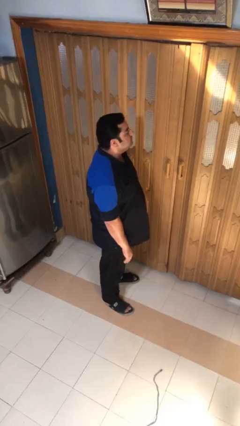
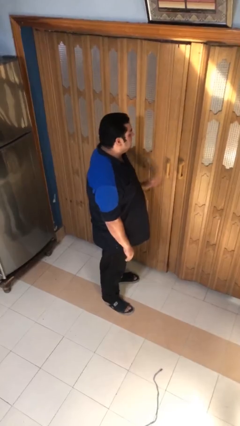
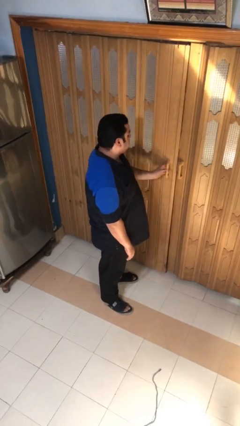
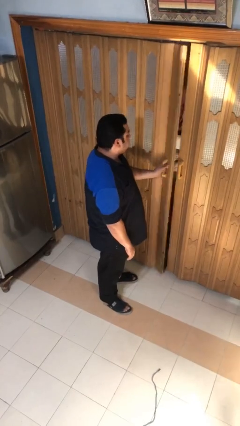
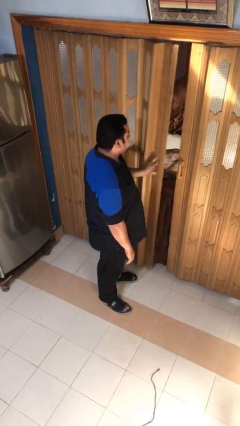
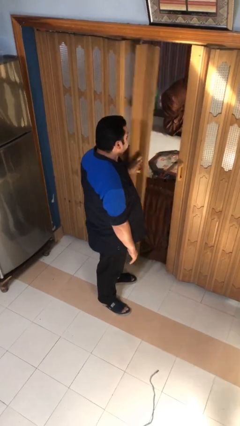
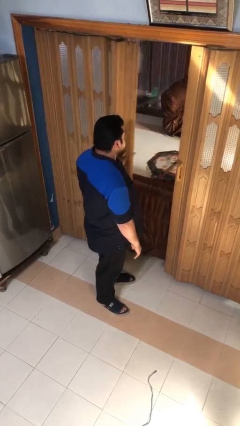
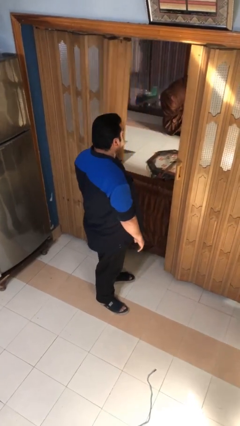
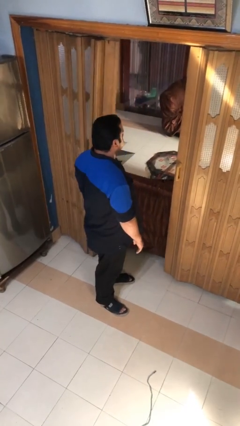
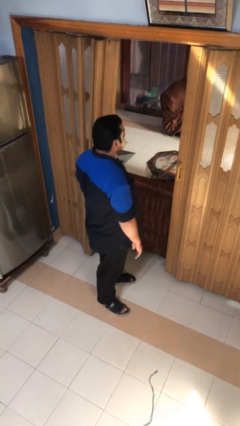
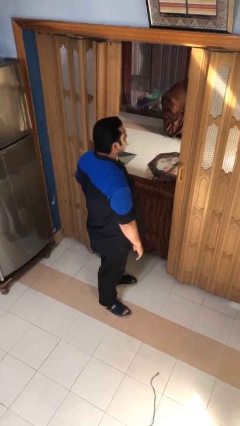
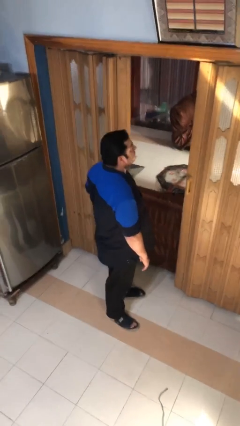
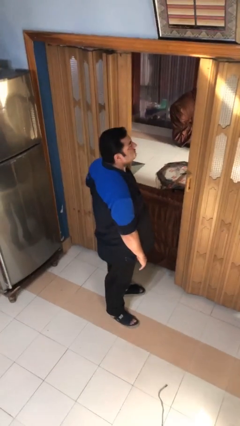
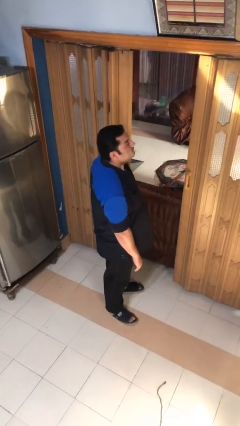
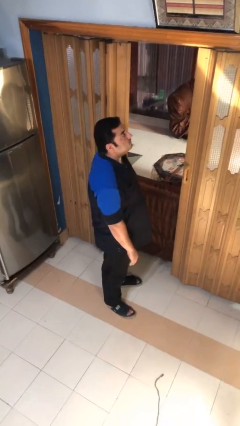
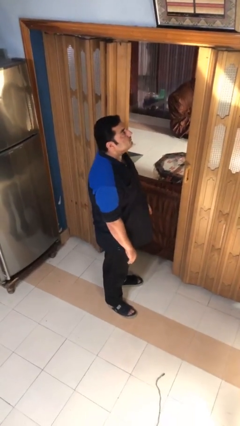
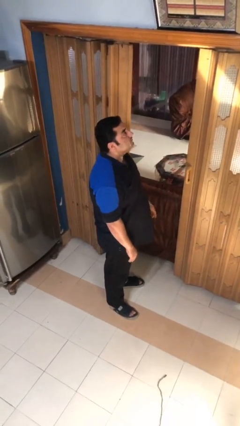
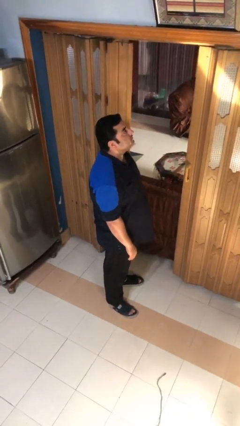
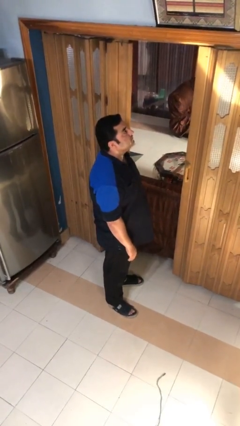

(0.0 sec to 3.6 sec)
person opens sliding door

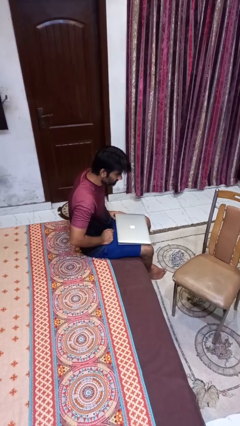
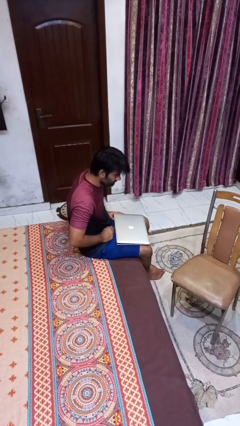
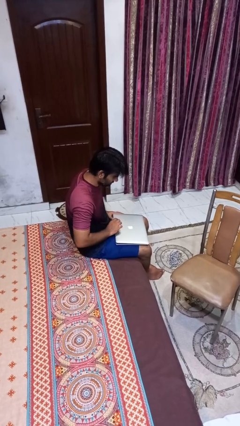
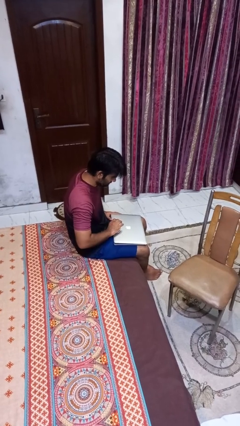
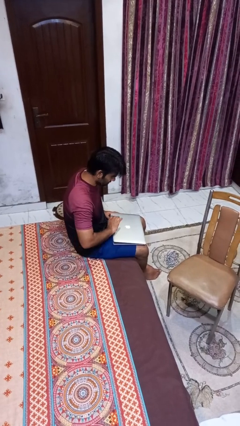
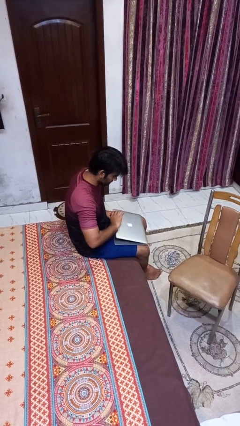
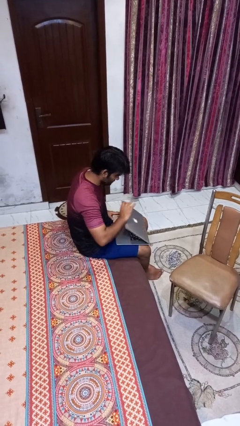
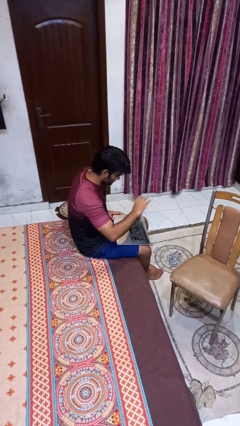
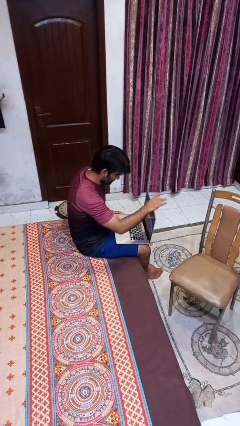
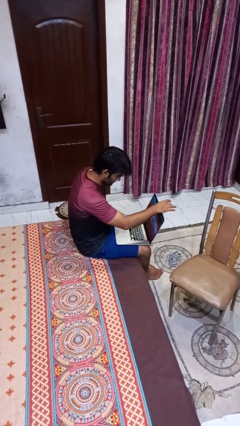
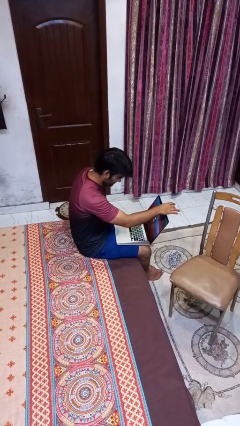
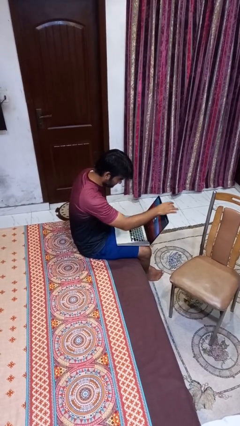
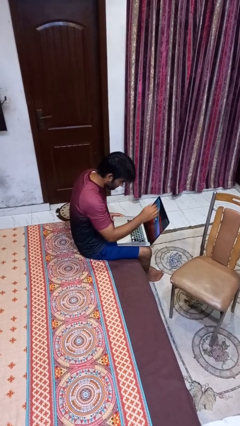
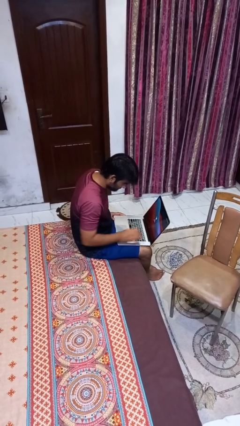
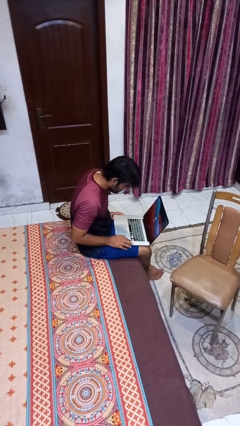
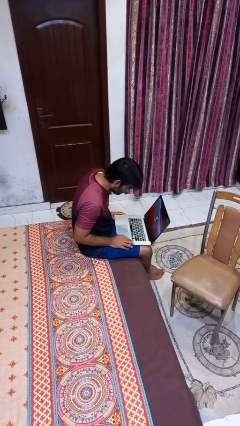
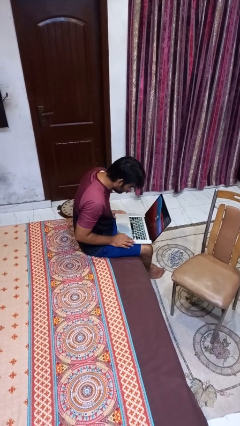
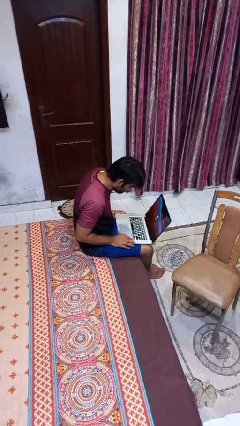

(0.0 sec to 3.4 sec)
person opens laptop

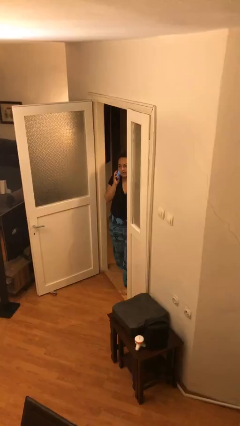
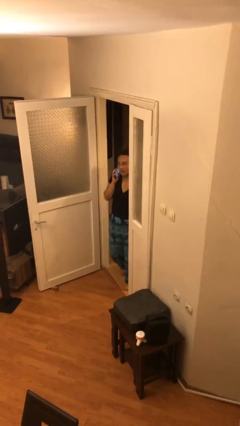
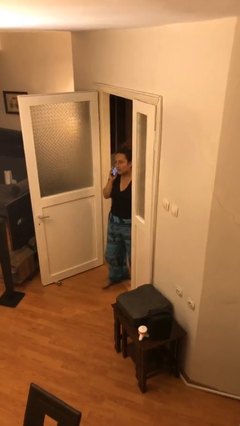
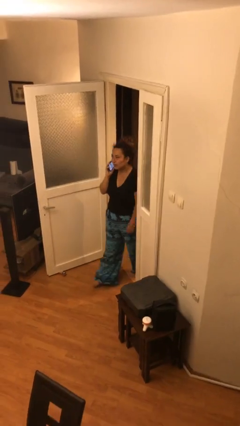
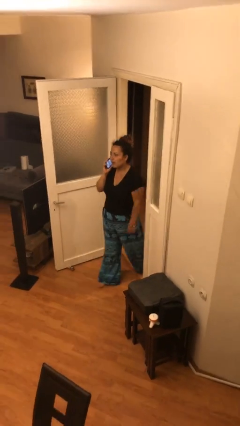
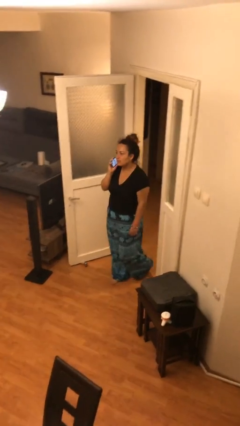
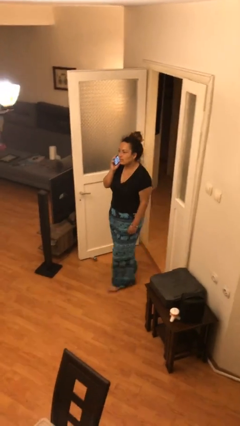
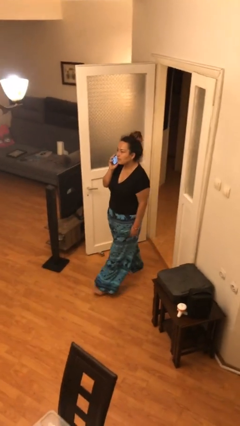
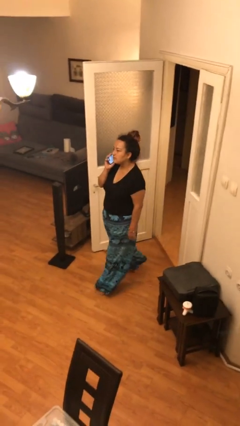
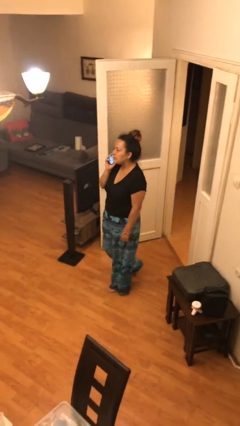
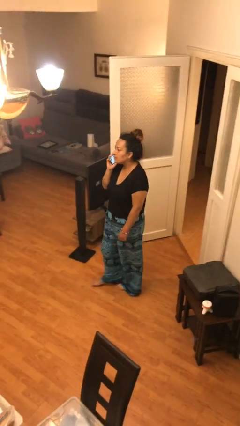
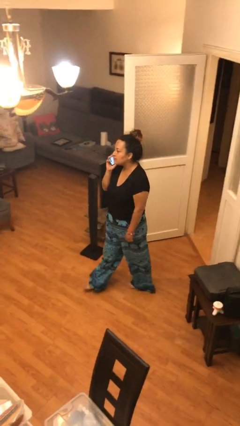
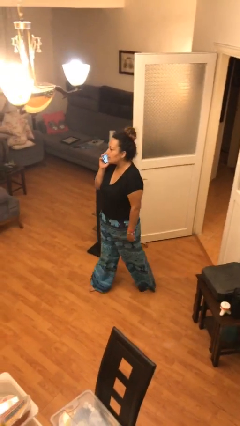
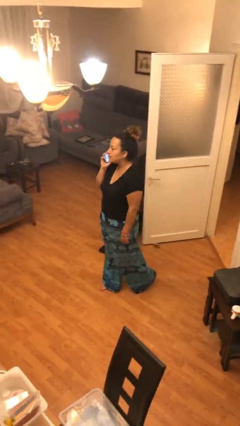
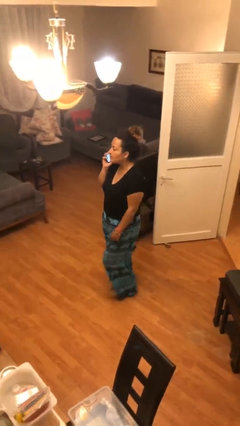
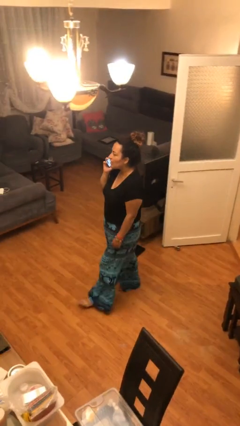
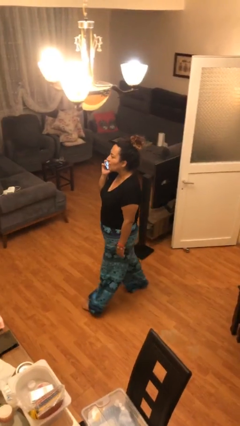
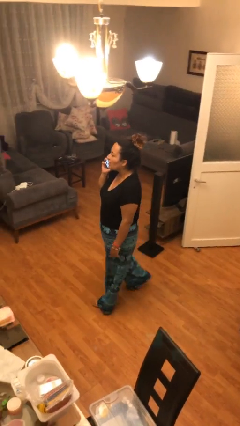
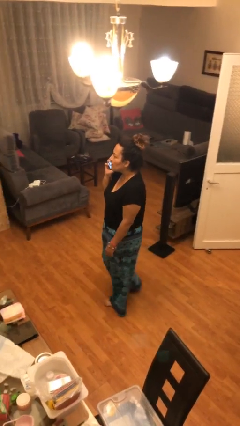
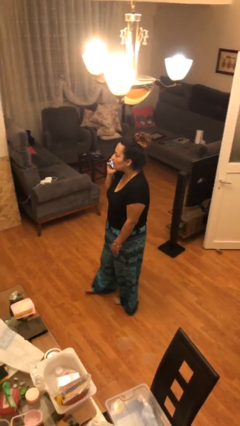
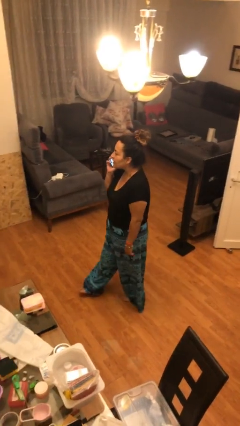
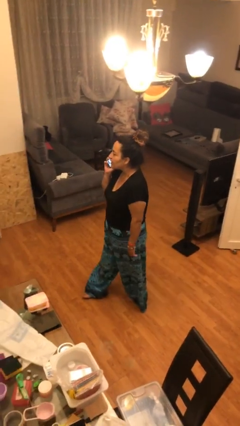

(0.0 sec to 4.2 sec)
person enters scene through structure

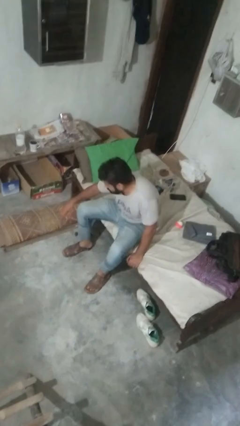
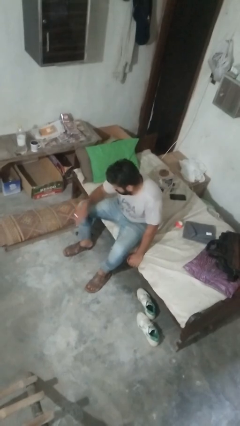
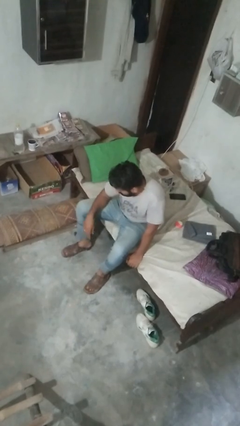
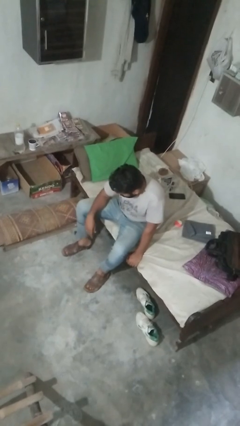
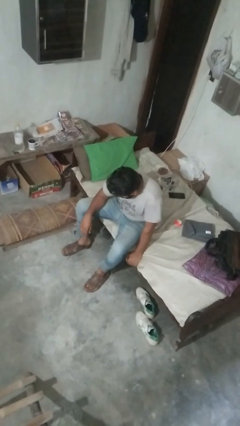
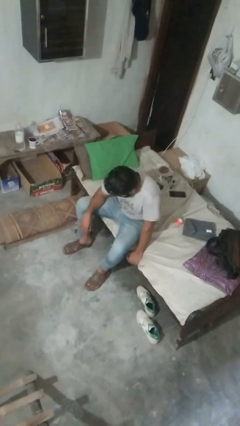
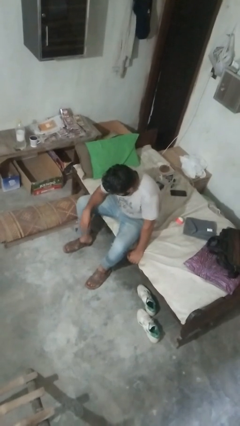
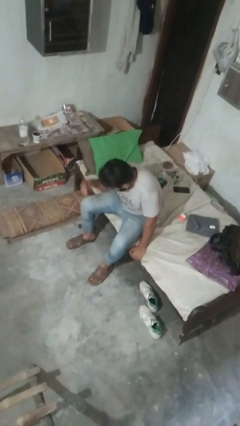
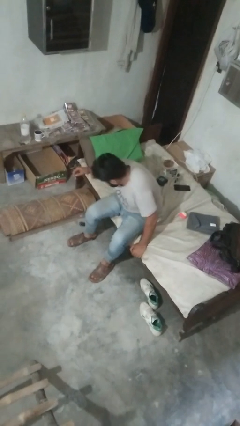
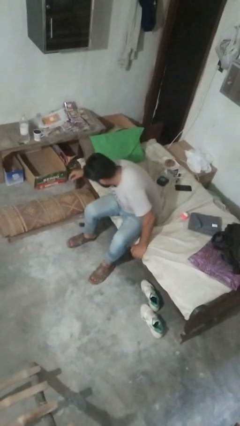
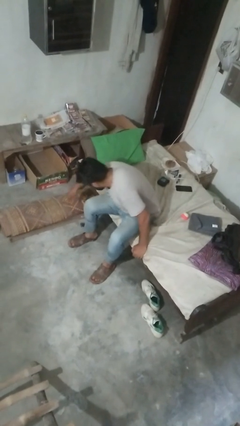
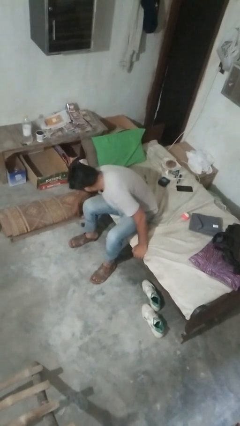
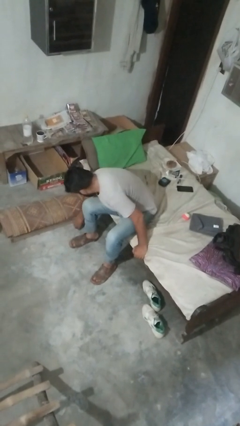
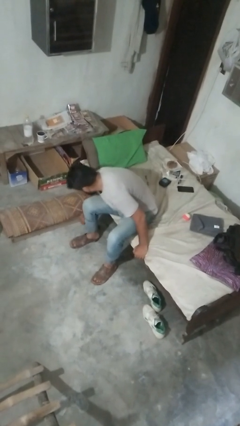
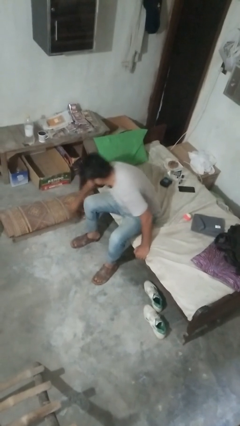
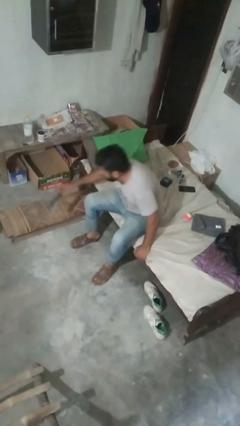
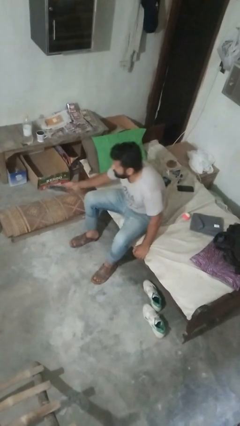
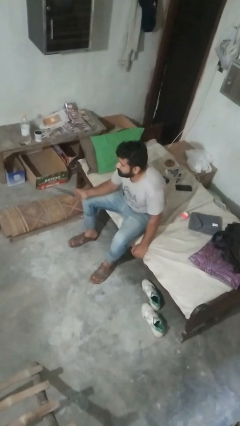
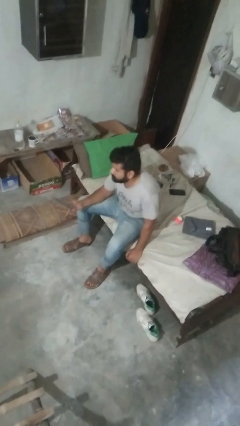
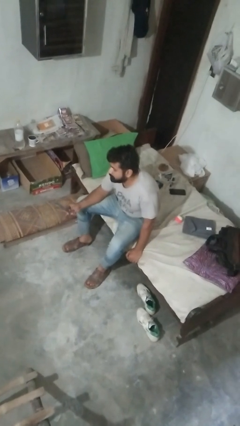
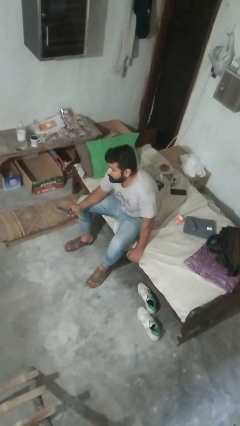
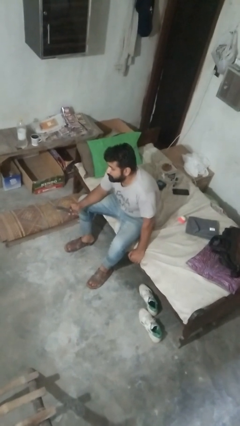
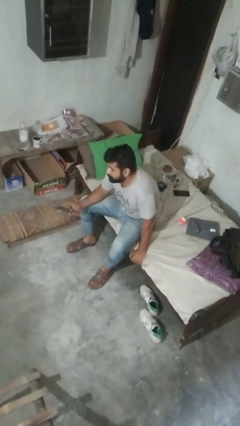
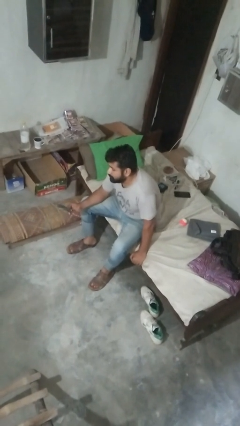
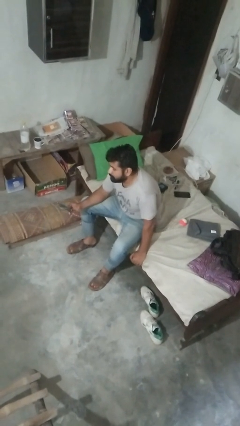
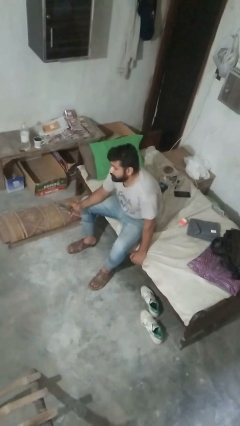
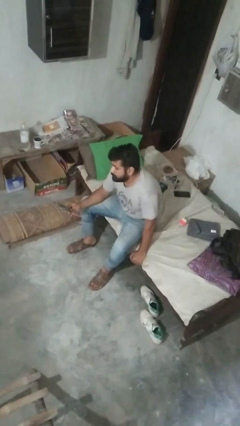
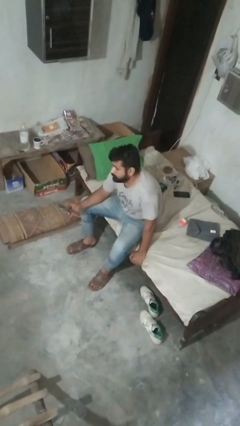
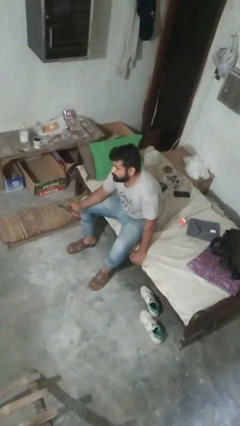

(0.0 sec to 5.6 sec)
person searches under couch

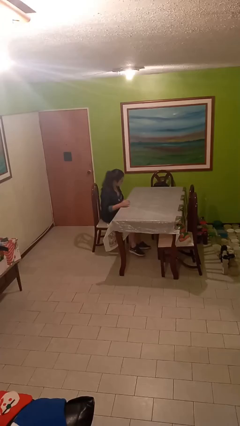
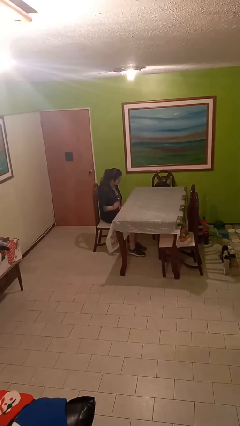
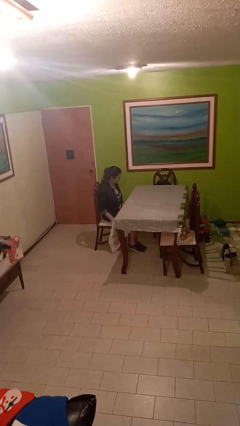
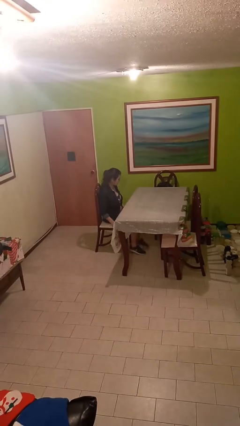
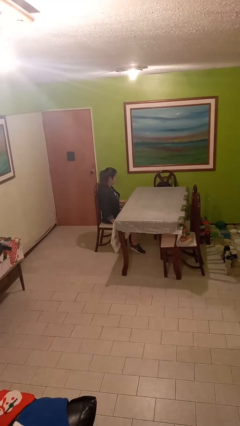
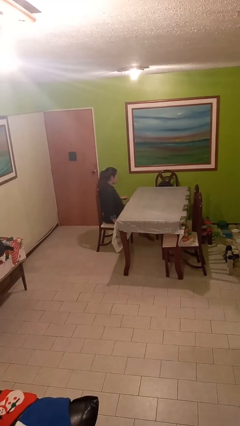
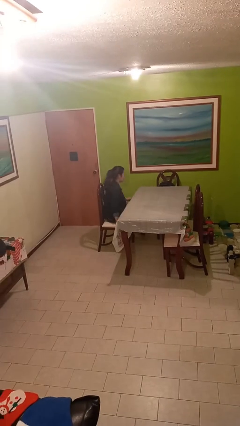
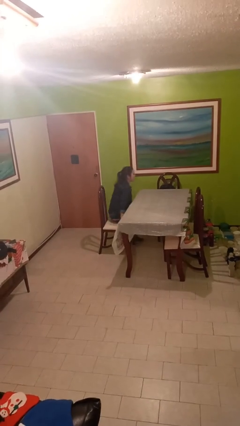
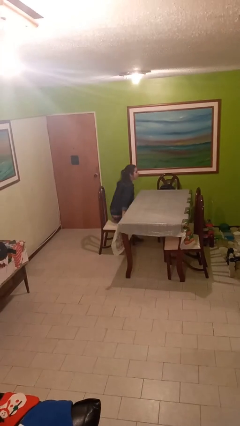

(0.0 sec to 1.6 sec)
person sits down
